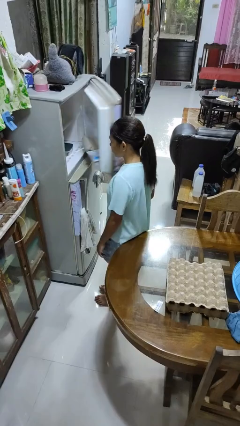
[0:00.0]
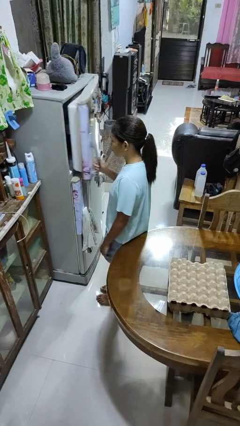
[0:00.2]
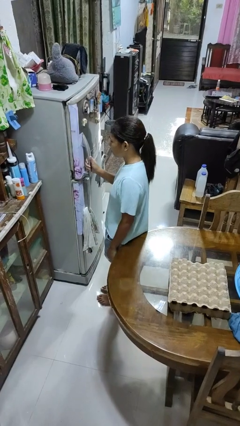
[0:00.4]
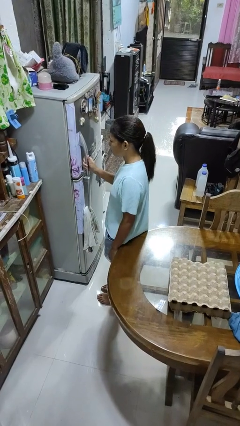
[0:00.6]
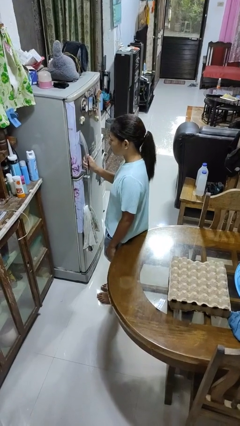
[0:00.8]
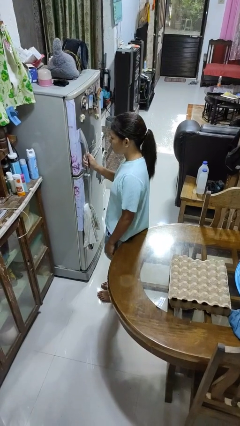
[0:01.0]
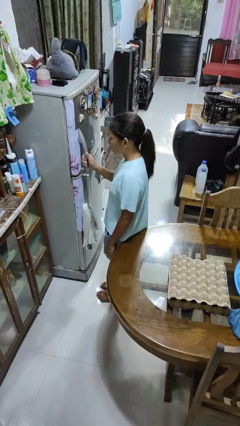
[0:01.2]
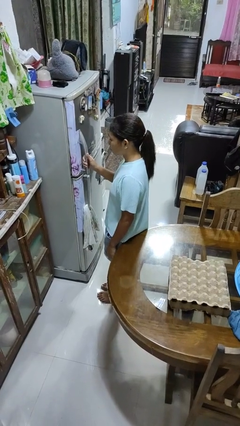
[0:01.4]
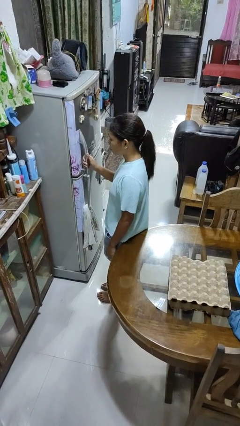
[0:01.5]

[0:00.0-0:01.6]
person closes refrigerator

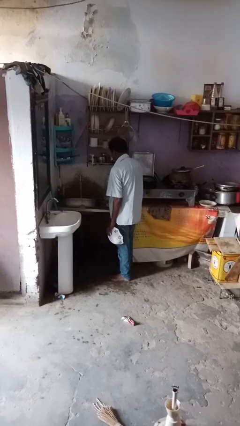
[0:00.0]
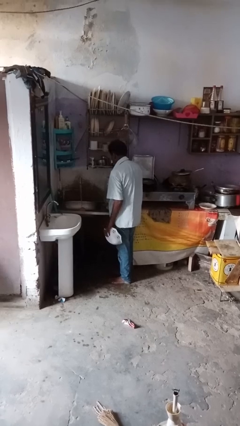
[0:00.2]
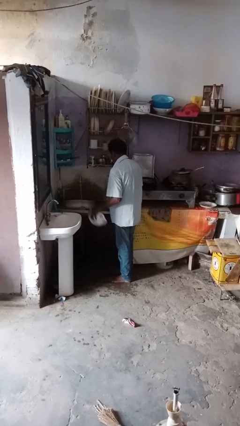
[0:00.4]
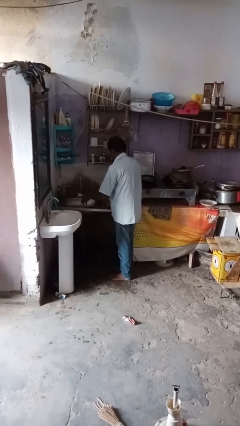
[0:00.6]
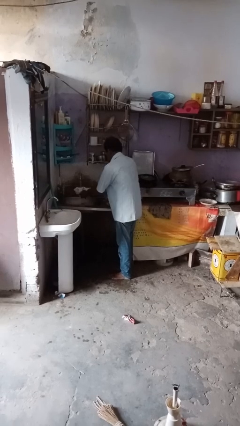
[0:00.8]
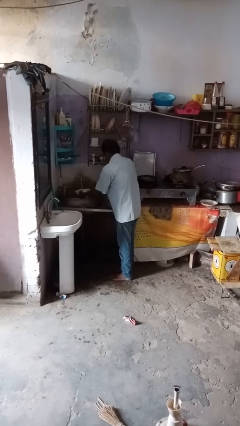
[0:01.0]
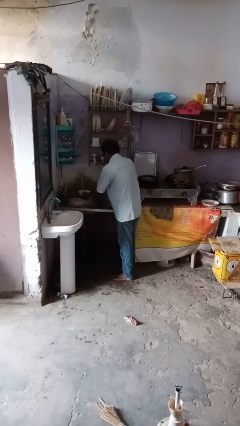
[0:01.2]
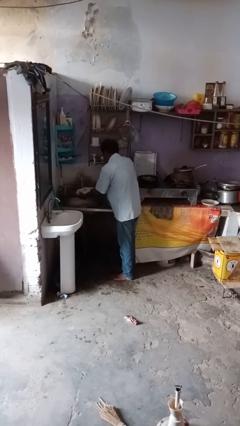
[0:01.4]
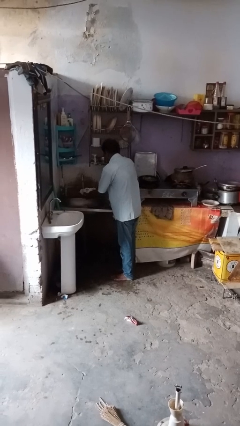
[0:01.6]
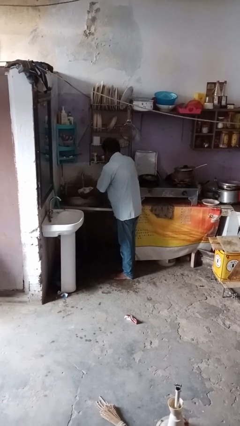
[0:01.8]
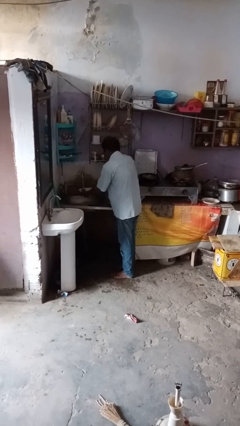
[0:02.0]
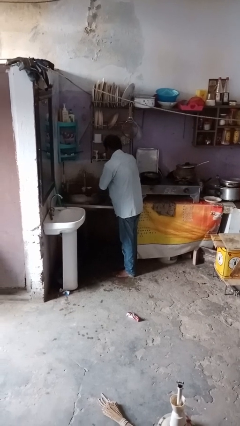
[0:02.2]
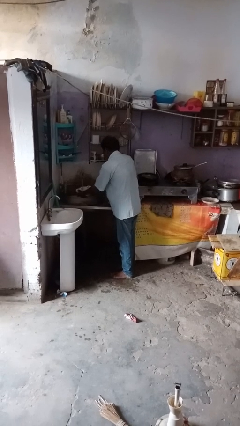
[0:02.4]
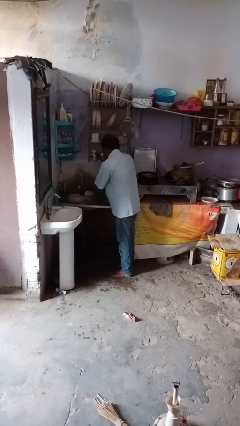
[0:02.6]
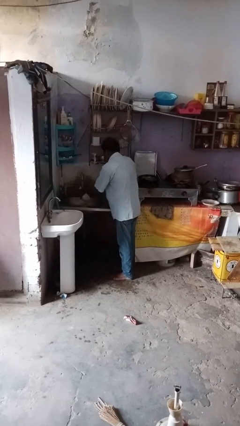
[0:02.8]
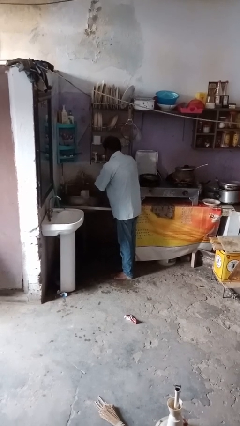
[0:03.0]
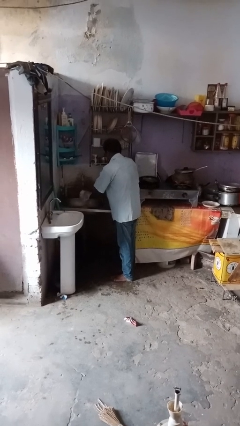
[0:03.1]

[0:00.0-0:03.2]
person washes dish

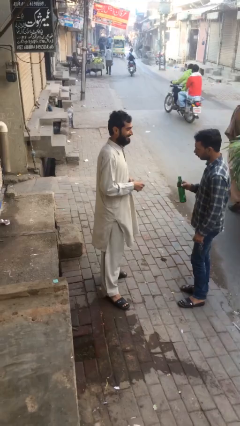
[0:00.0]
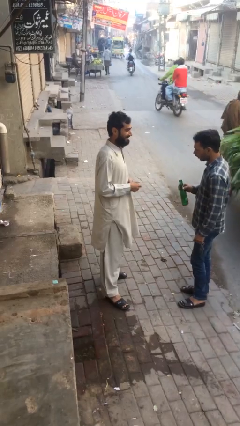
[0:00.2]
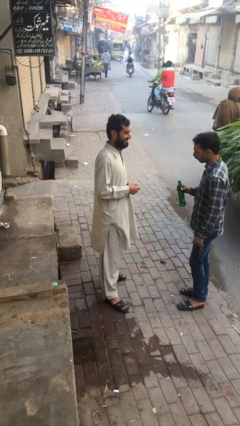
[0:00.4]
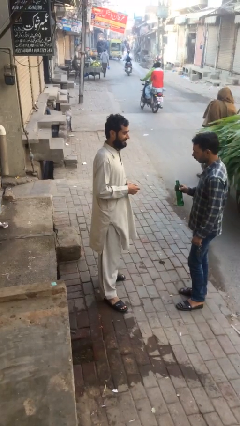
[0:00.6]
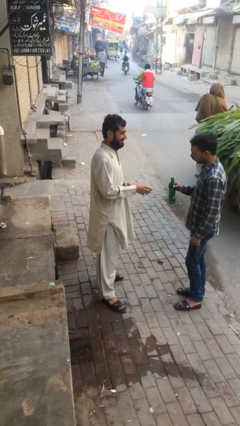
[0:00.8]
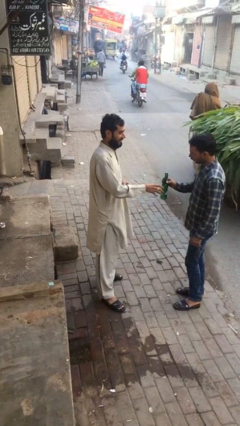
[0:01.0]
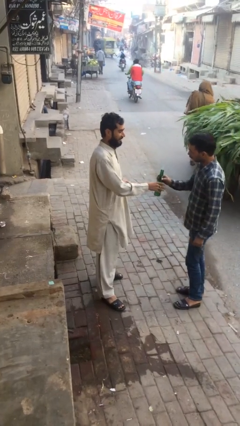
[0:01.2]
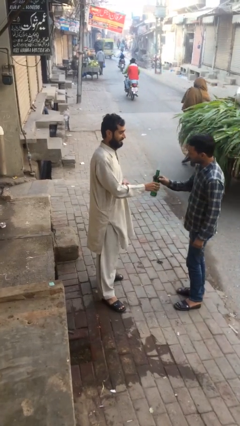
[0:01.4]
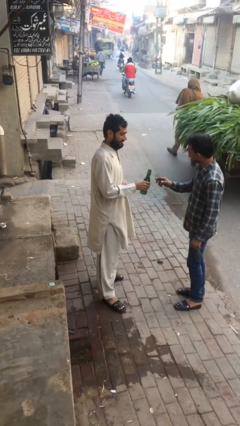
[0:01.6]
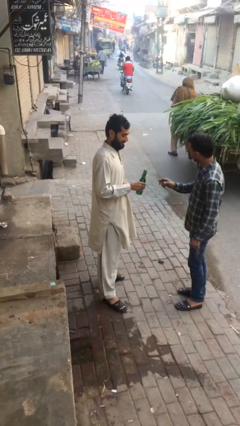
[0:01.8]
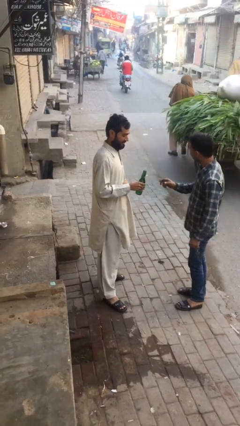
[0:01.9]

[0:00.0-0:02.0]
person transfers object to person

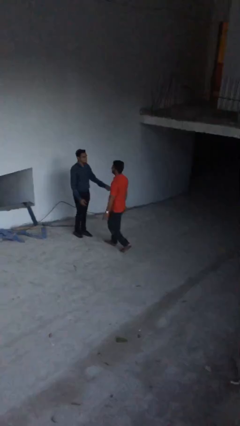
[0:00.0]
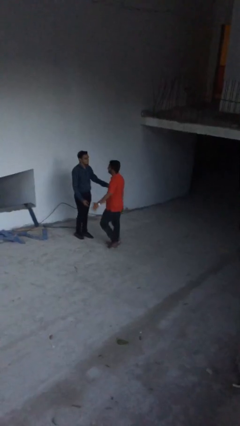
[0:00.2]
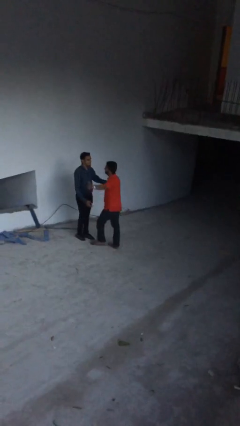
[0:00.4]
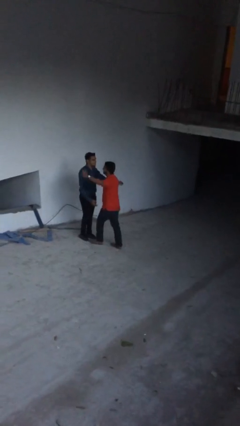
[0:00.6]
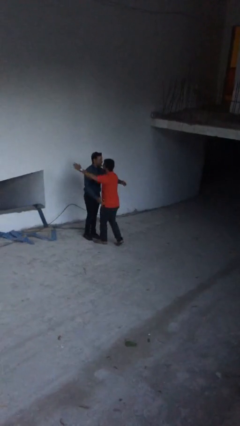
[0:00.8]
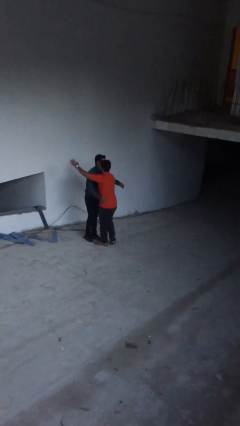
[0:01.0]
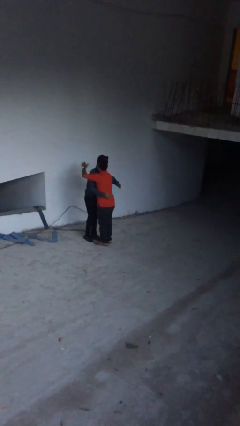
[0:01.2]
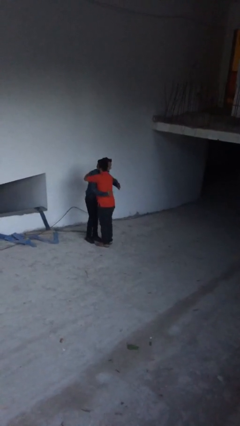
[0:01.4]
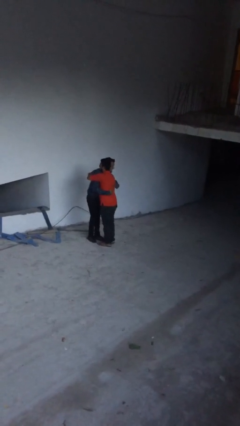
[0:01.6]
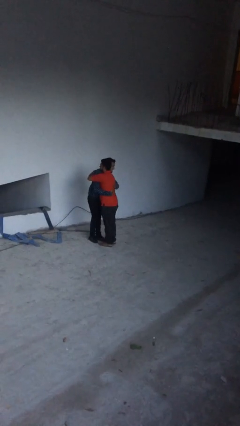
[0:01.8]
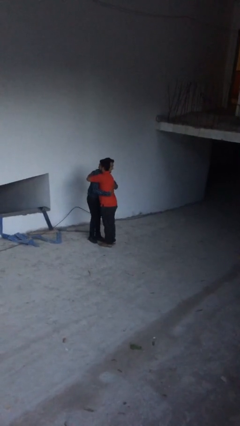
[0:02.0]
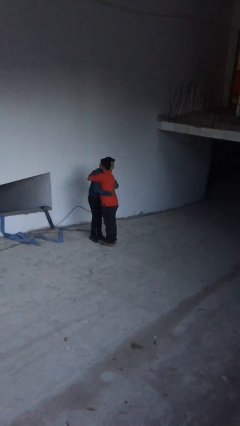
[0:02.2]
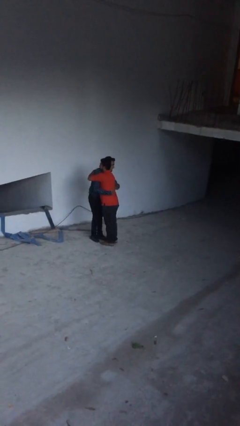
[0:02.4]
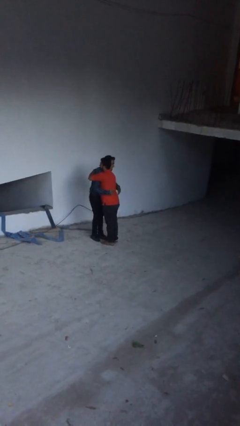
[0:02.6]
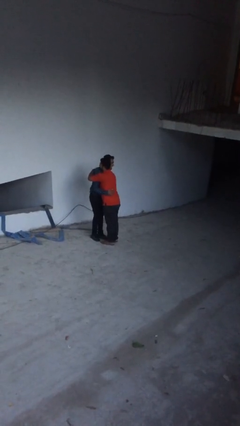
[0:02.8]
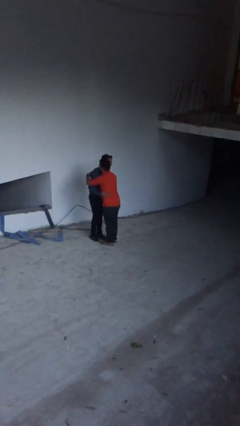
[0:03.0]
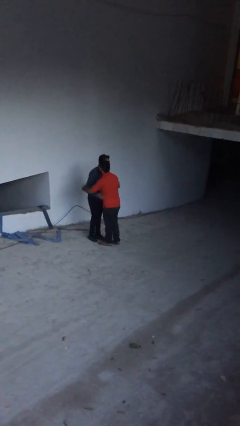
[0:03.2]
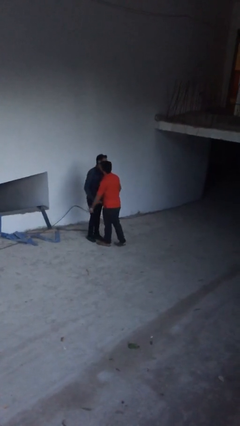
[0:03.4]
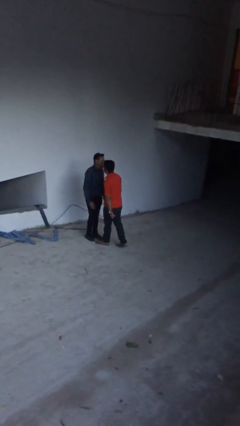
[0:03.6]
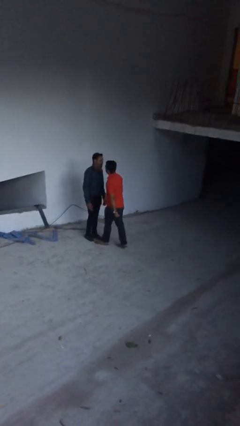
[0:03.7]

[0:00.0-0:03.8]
person embraces person

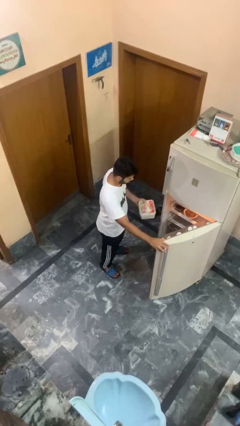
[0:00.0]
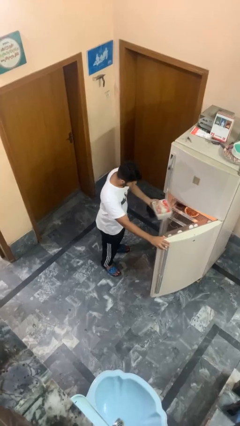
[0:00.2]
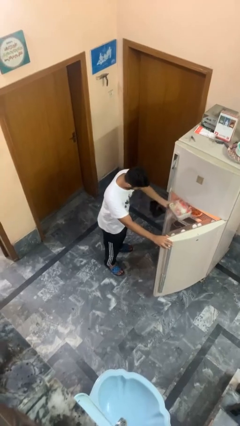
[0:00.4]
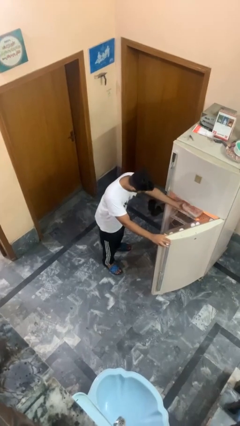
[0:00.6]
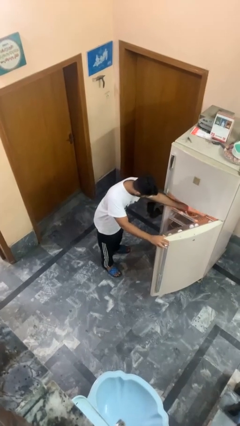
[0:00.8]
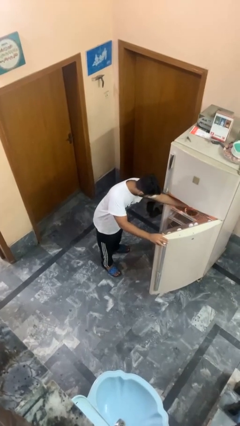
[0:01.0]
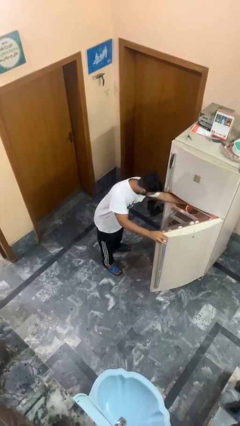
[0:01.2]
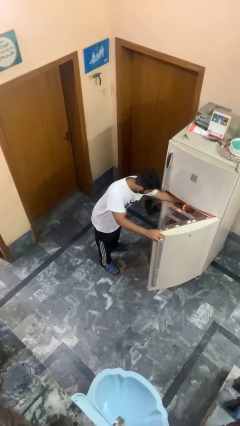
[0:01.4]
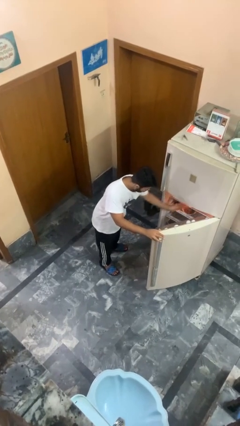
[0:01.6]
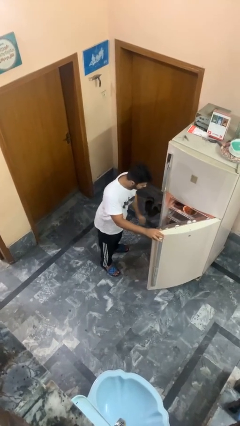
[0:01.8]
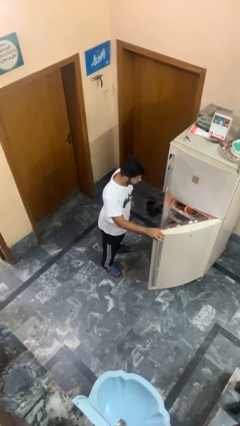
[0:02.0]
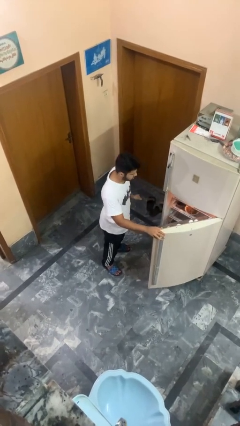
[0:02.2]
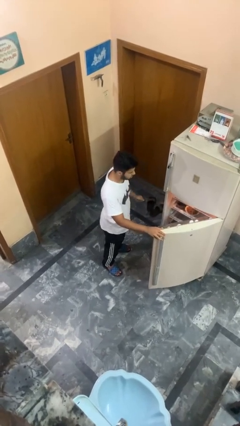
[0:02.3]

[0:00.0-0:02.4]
person puts object into refrigerator

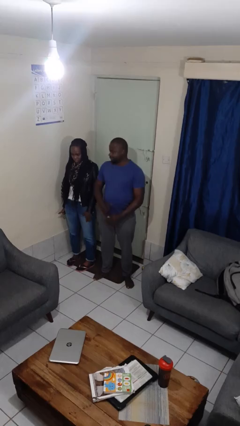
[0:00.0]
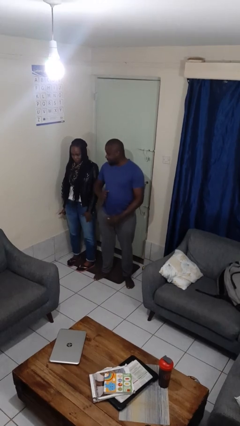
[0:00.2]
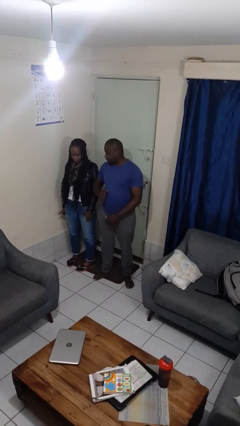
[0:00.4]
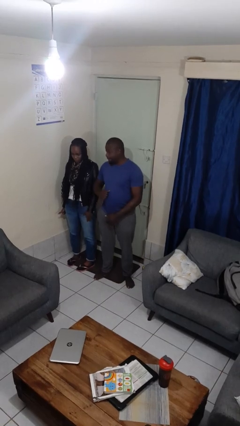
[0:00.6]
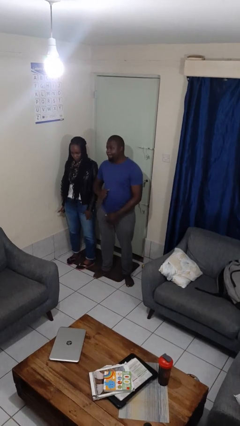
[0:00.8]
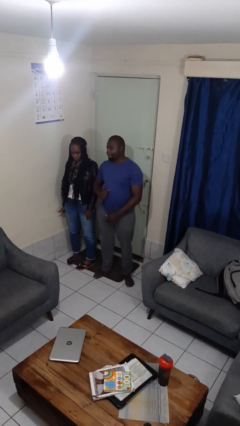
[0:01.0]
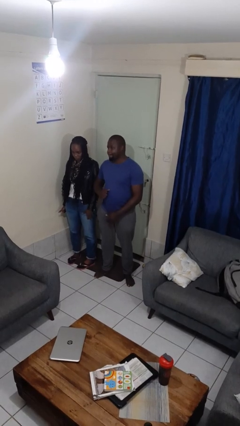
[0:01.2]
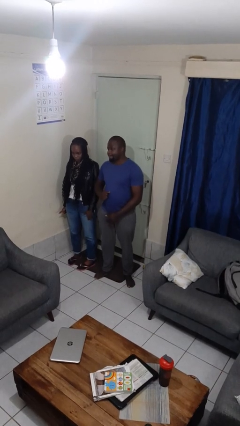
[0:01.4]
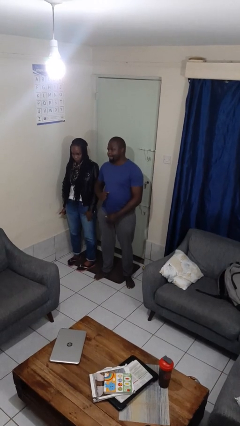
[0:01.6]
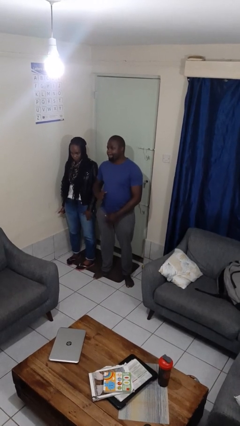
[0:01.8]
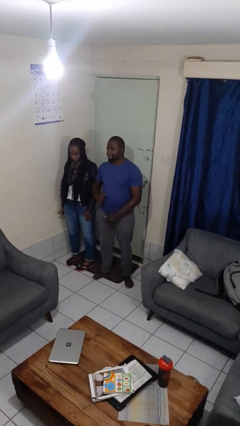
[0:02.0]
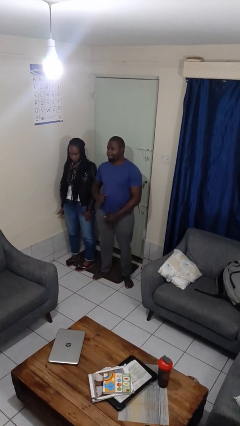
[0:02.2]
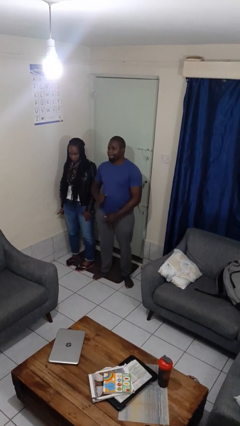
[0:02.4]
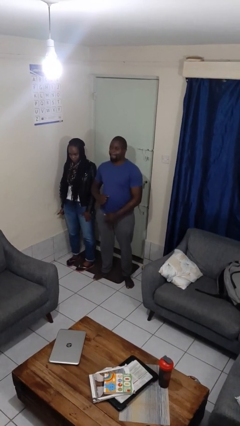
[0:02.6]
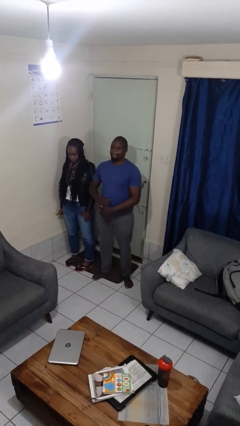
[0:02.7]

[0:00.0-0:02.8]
person nudges person with elbow

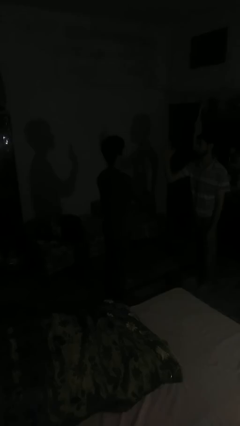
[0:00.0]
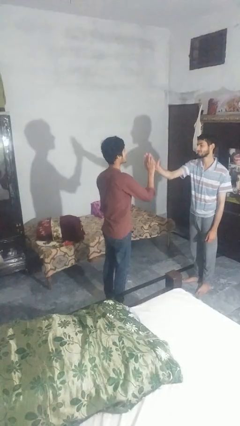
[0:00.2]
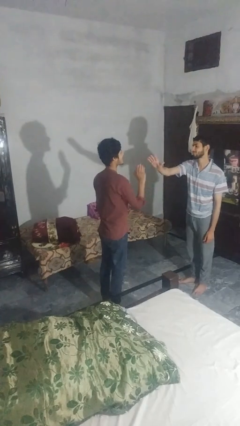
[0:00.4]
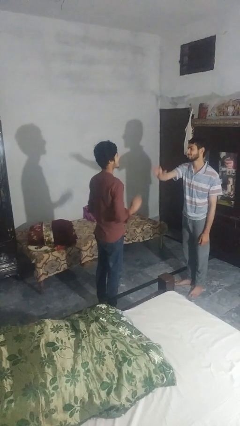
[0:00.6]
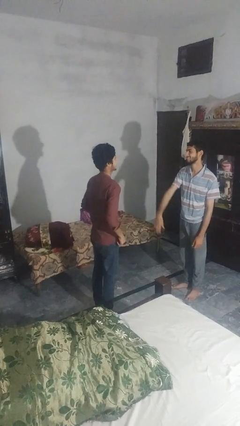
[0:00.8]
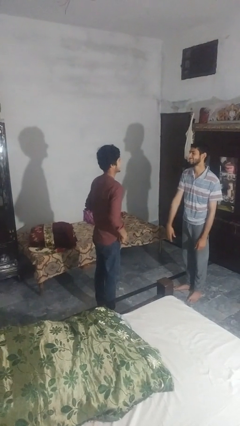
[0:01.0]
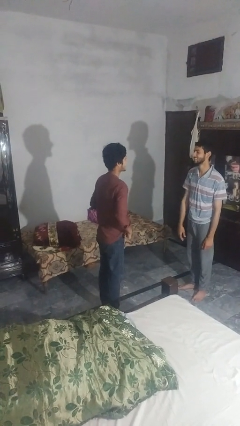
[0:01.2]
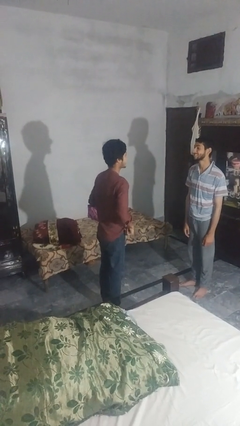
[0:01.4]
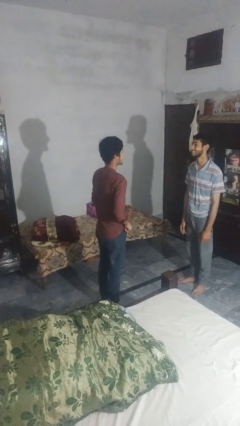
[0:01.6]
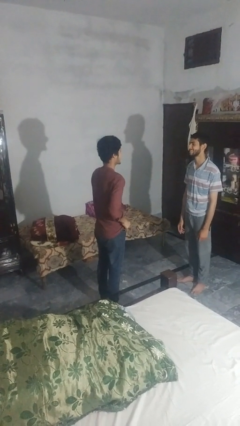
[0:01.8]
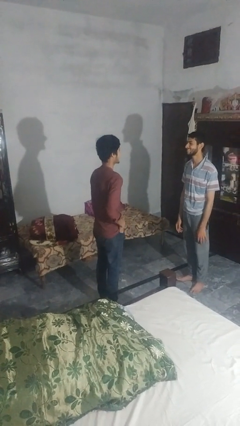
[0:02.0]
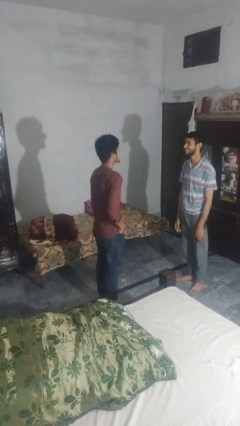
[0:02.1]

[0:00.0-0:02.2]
person highfives hand
